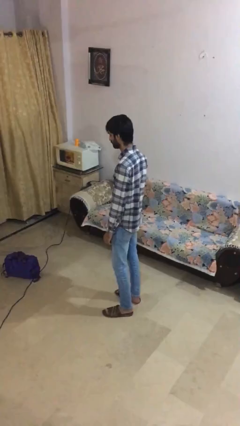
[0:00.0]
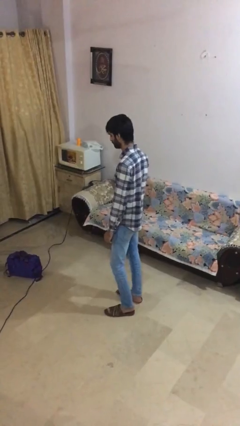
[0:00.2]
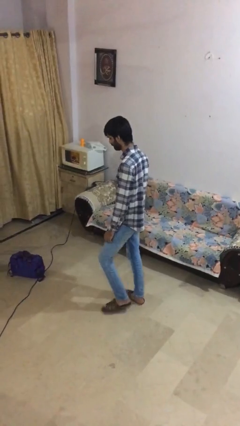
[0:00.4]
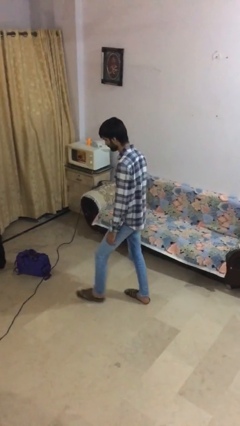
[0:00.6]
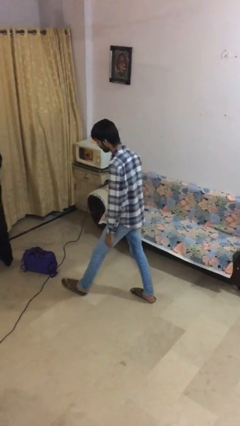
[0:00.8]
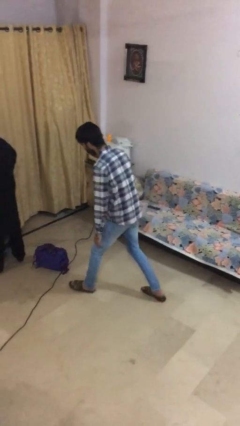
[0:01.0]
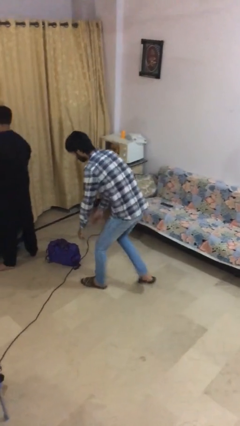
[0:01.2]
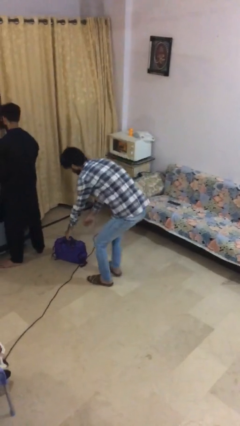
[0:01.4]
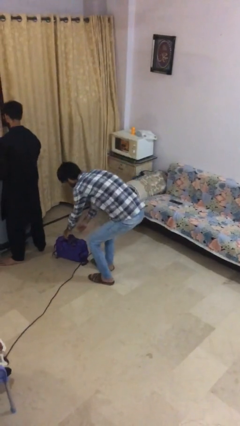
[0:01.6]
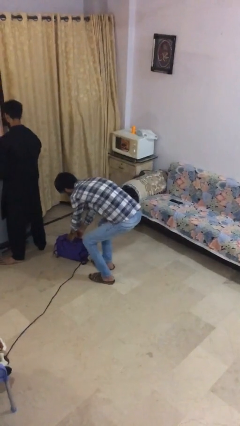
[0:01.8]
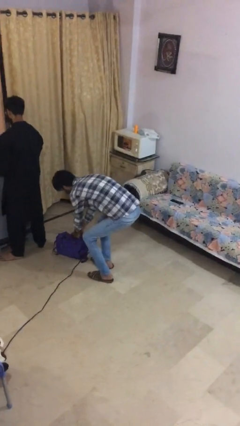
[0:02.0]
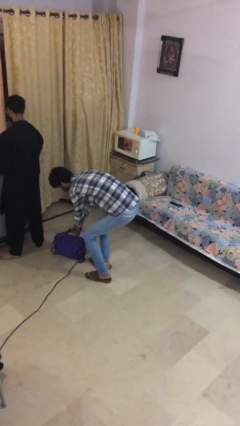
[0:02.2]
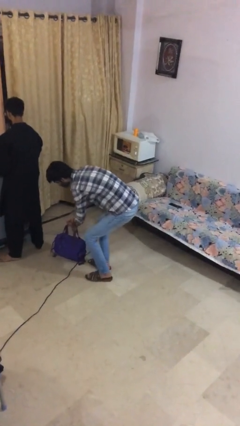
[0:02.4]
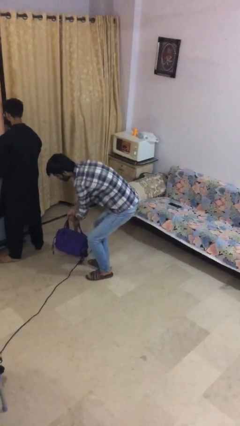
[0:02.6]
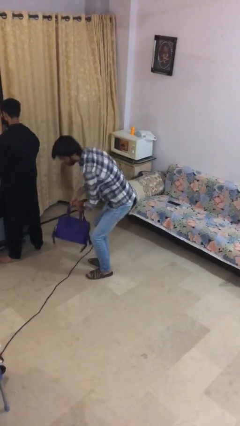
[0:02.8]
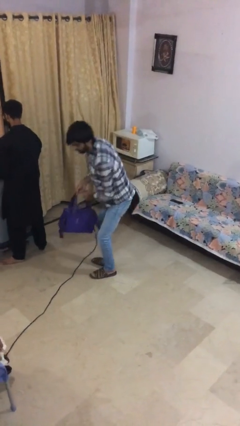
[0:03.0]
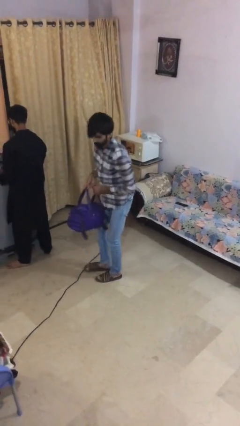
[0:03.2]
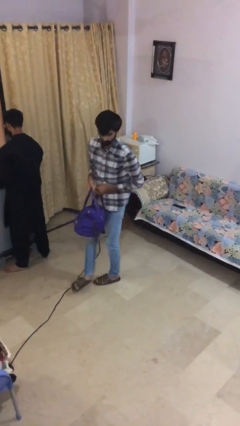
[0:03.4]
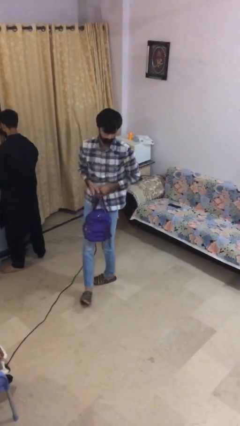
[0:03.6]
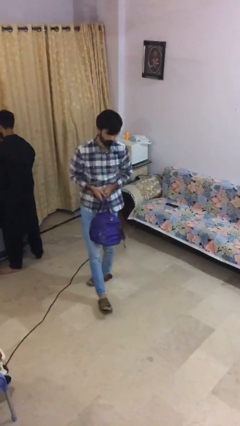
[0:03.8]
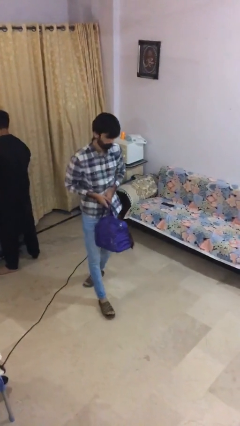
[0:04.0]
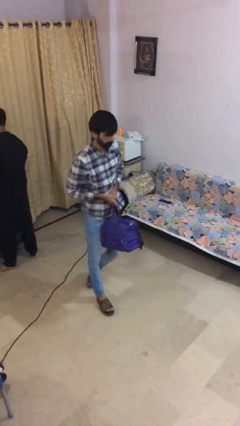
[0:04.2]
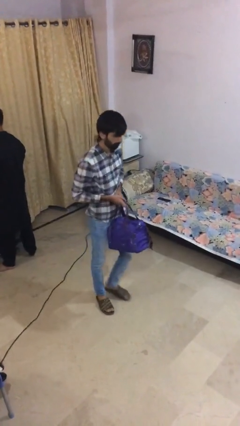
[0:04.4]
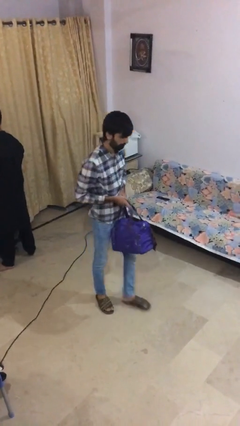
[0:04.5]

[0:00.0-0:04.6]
person steals object from person

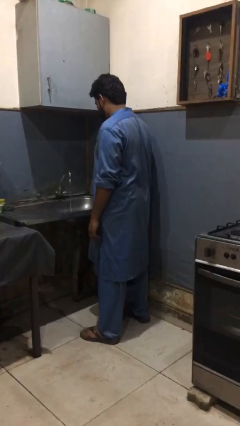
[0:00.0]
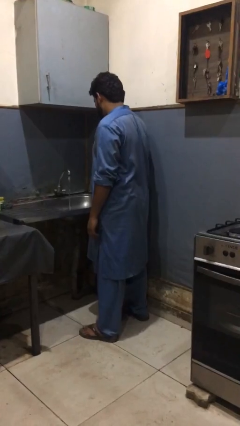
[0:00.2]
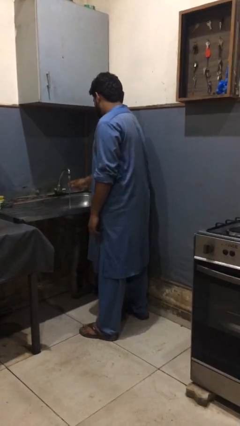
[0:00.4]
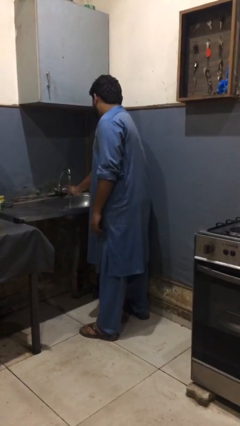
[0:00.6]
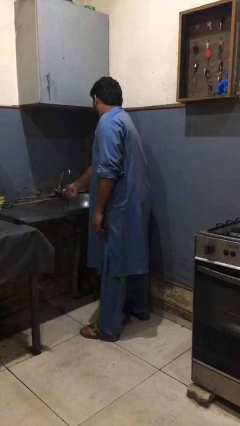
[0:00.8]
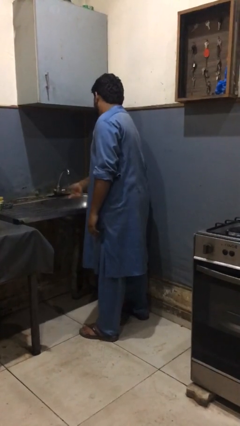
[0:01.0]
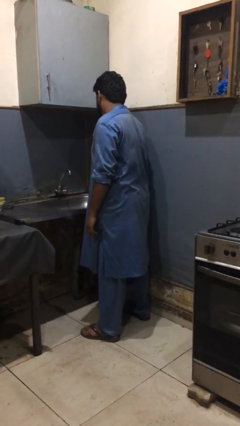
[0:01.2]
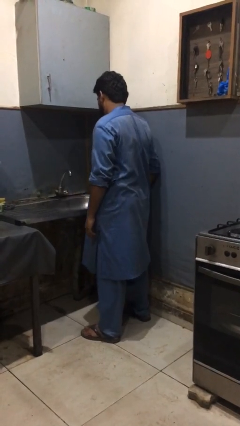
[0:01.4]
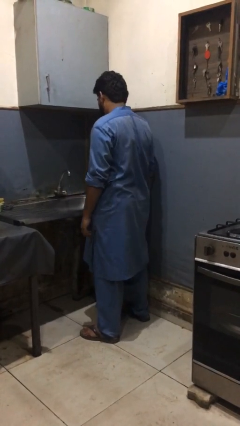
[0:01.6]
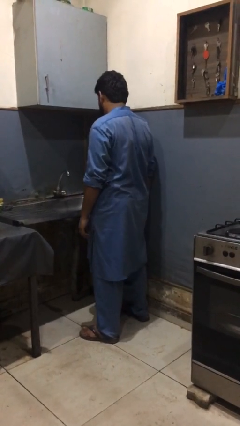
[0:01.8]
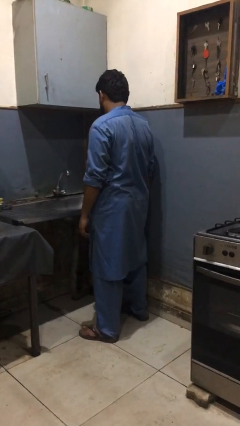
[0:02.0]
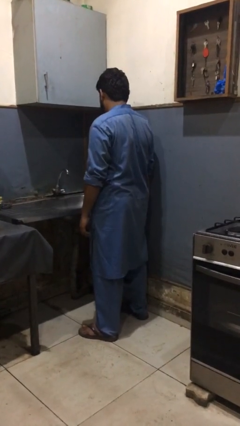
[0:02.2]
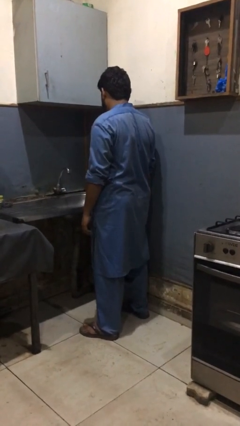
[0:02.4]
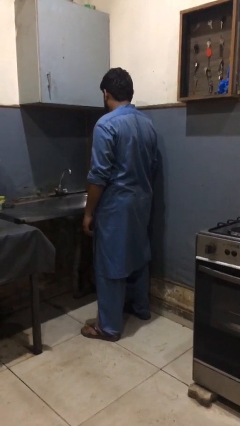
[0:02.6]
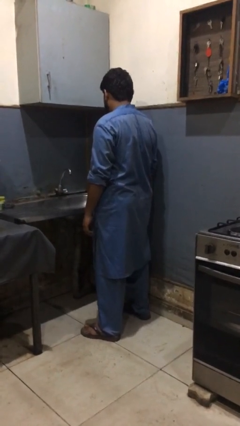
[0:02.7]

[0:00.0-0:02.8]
person turns off faucet

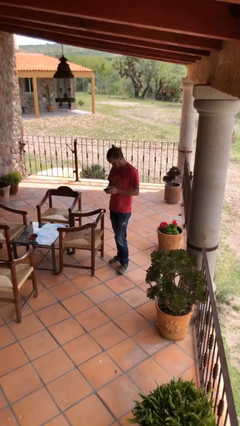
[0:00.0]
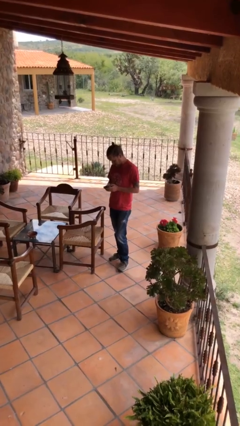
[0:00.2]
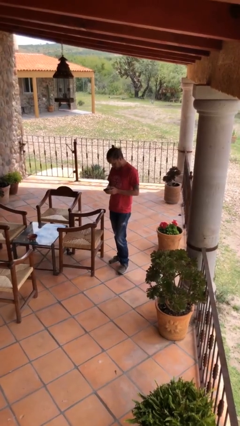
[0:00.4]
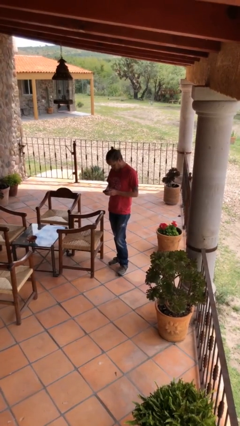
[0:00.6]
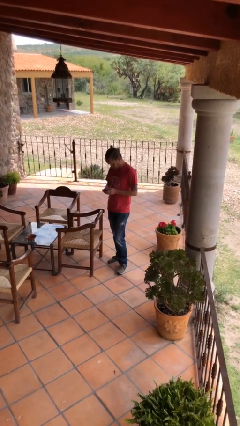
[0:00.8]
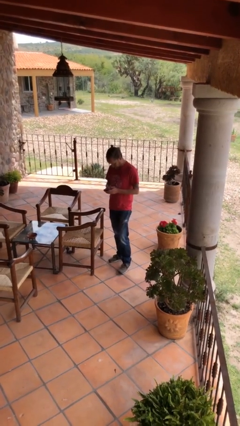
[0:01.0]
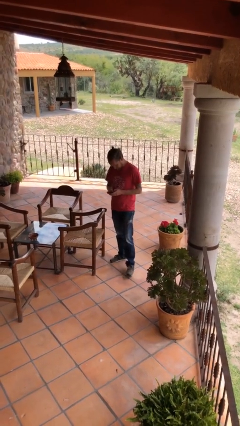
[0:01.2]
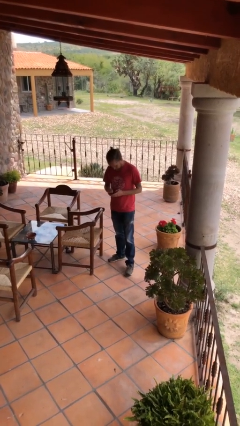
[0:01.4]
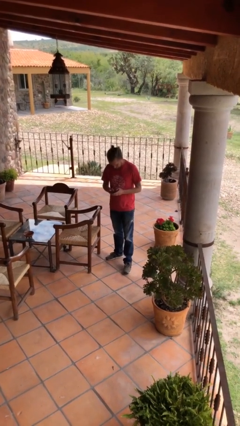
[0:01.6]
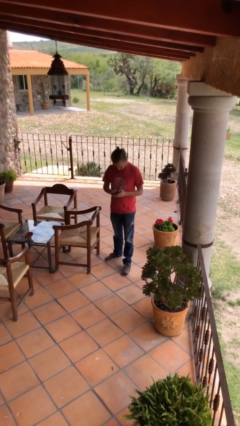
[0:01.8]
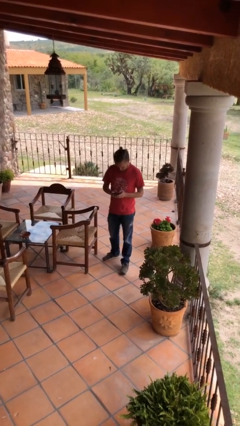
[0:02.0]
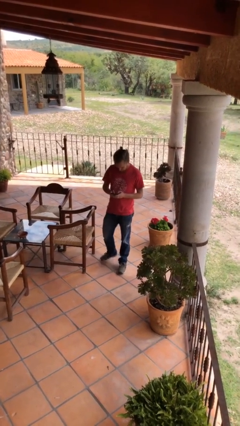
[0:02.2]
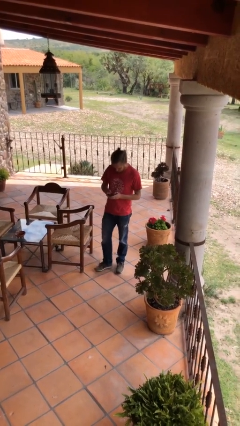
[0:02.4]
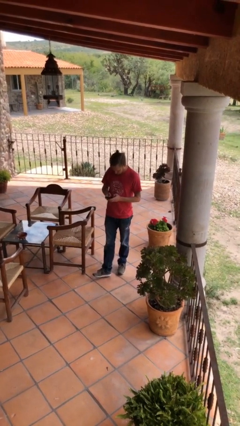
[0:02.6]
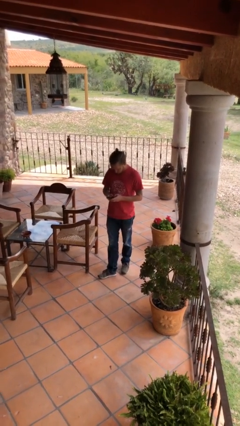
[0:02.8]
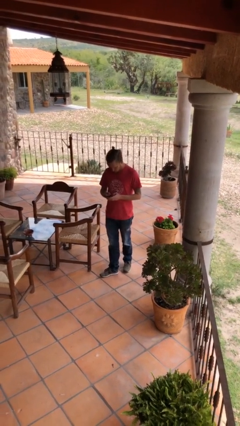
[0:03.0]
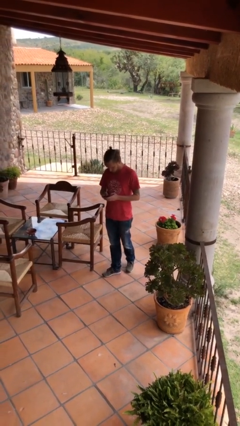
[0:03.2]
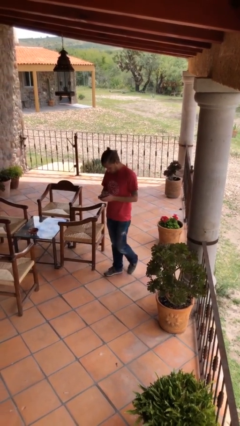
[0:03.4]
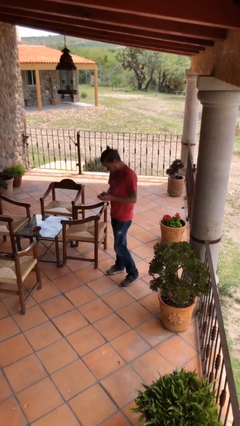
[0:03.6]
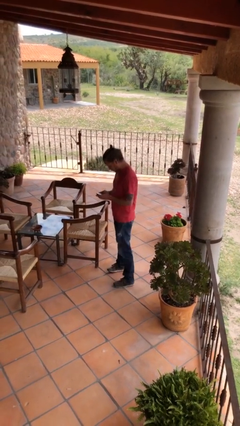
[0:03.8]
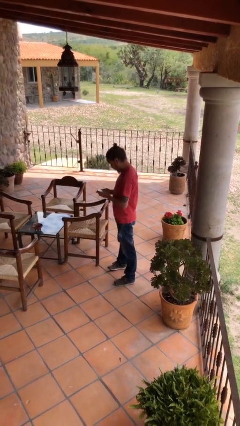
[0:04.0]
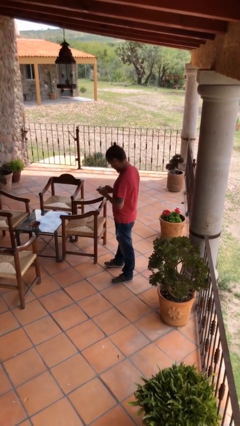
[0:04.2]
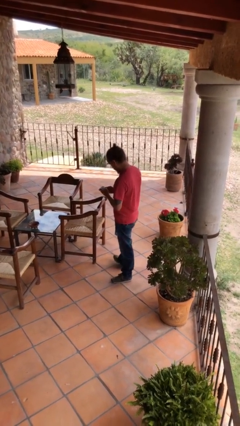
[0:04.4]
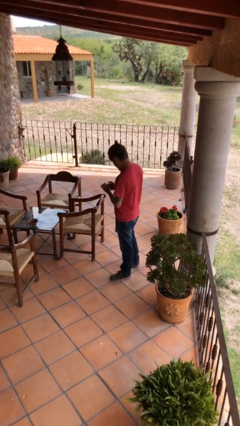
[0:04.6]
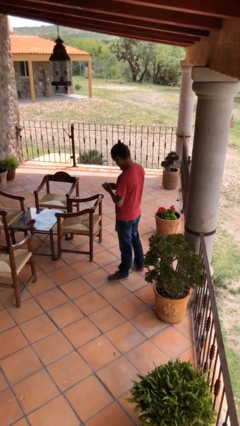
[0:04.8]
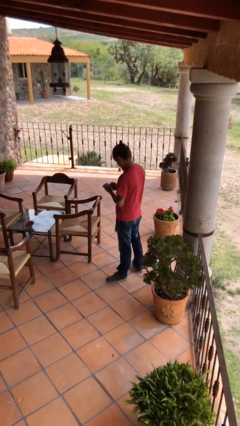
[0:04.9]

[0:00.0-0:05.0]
person texts on phone

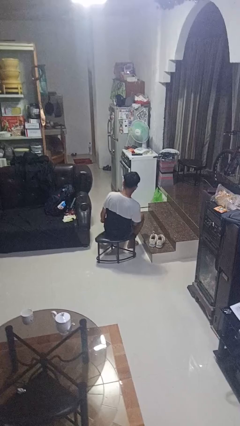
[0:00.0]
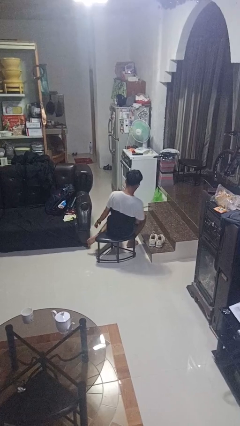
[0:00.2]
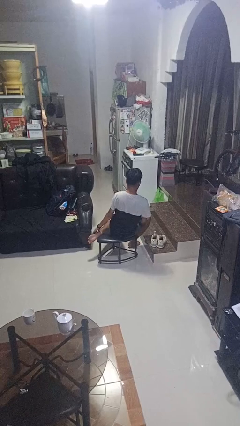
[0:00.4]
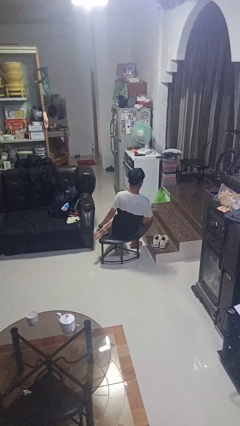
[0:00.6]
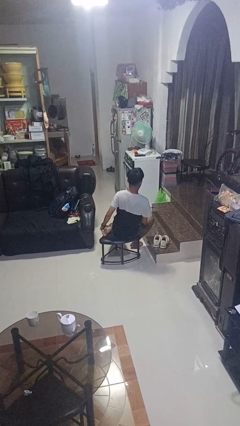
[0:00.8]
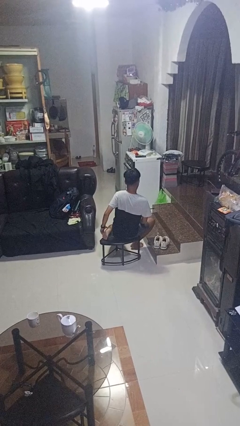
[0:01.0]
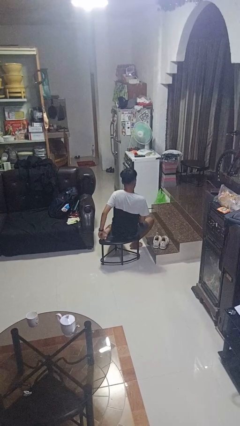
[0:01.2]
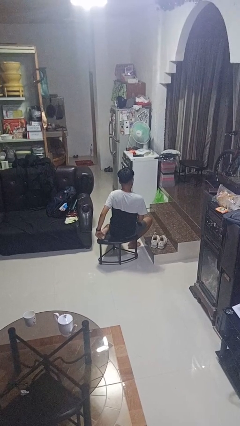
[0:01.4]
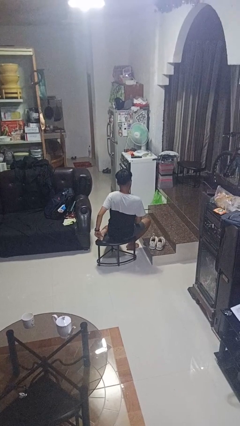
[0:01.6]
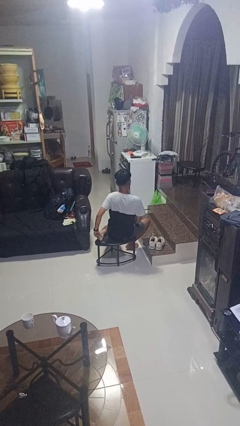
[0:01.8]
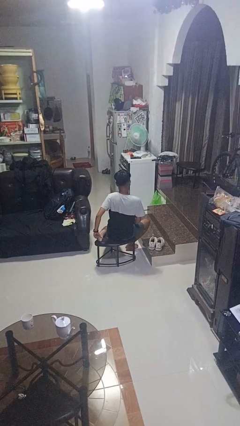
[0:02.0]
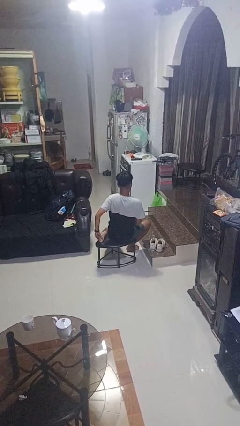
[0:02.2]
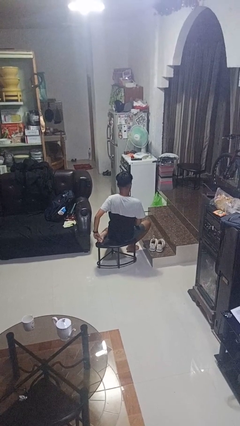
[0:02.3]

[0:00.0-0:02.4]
person rubs foot

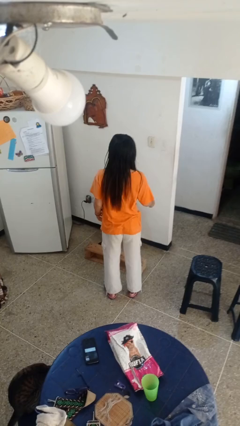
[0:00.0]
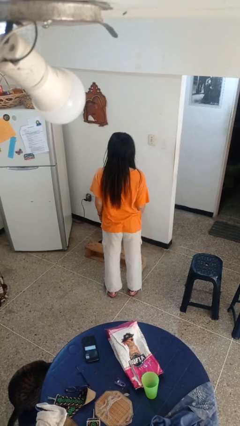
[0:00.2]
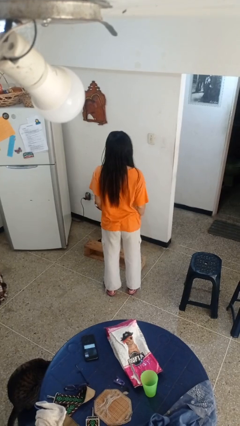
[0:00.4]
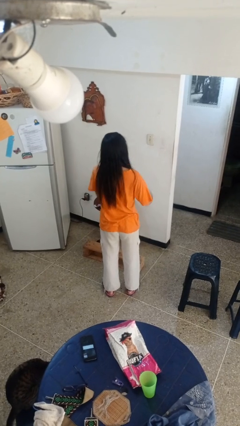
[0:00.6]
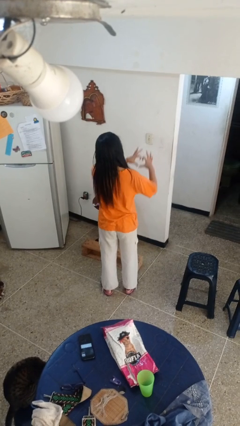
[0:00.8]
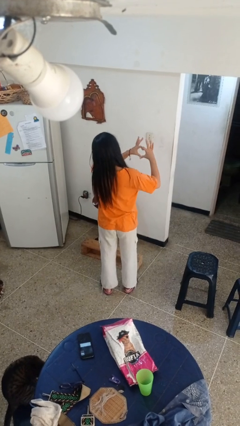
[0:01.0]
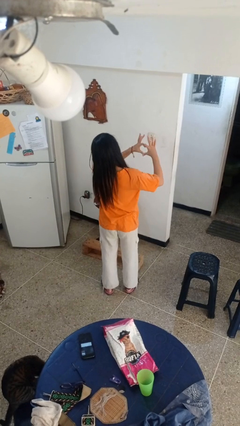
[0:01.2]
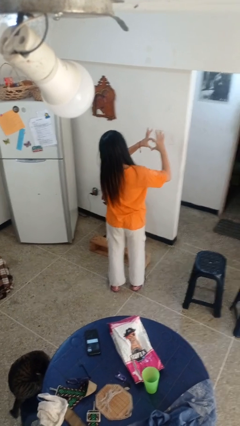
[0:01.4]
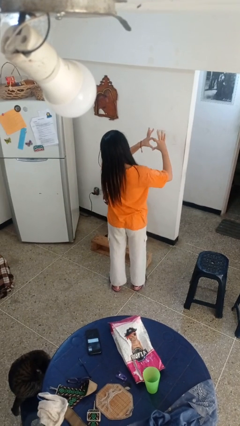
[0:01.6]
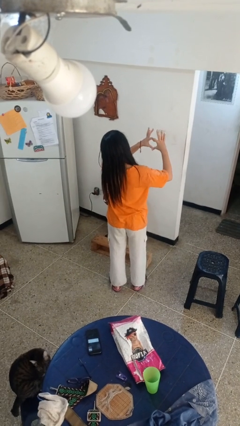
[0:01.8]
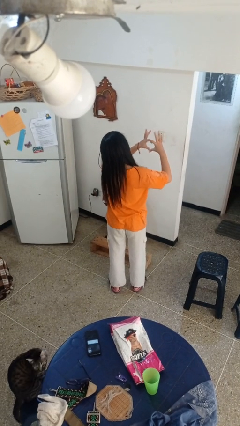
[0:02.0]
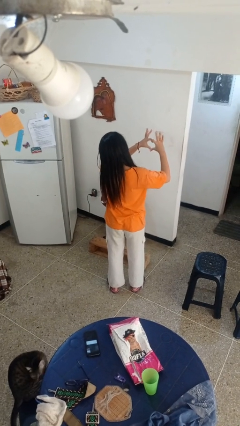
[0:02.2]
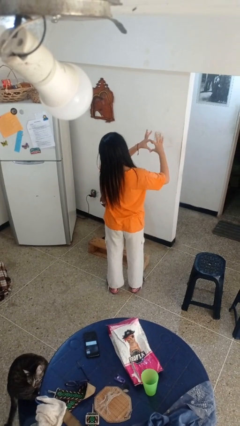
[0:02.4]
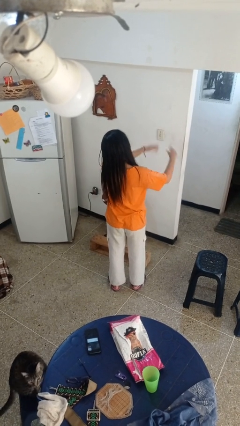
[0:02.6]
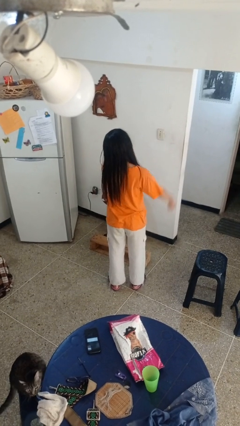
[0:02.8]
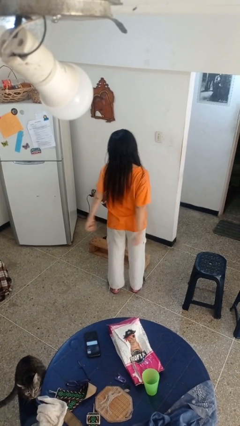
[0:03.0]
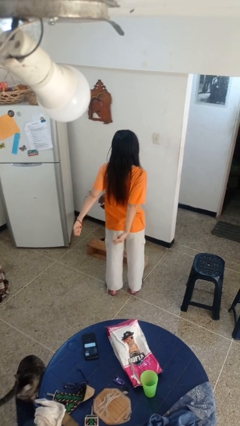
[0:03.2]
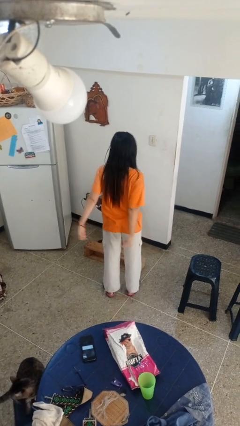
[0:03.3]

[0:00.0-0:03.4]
person gestures heart
